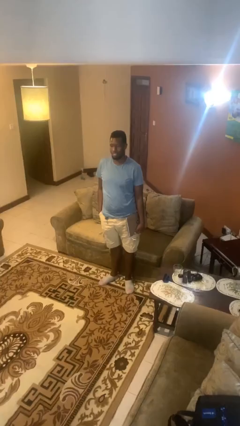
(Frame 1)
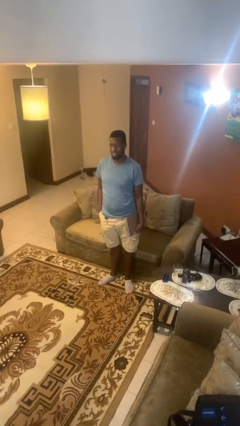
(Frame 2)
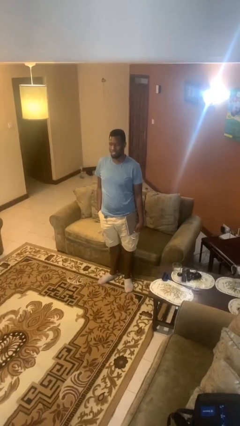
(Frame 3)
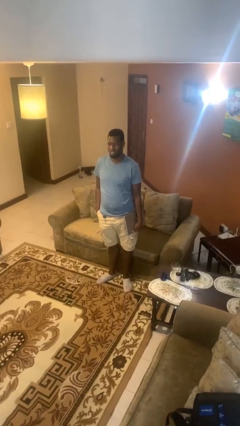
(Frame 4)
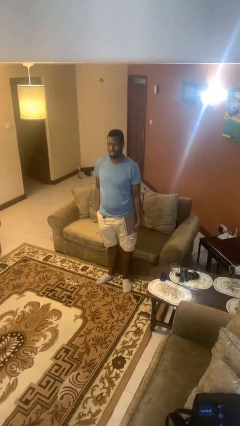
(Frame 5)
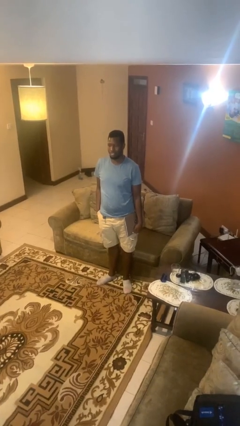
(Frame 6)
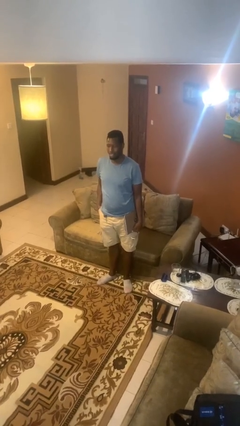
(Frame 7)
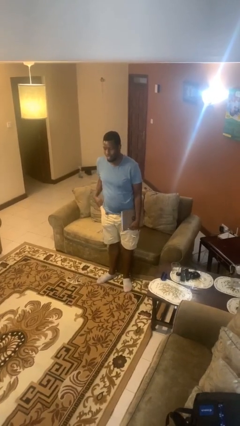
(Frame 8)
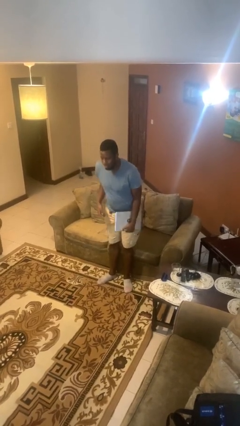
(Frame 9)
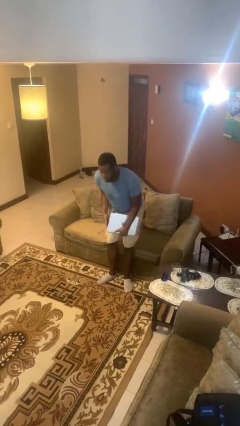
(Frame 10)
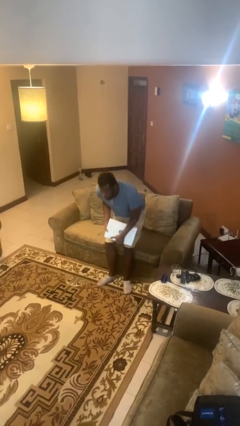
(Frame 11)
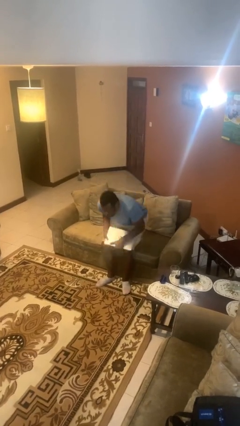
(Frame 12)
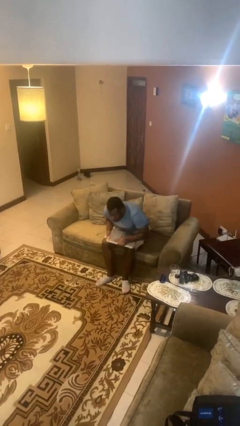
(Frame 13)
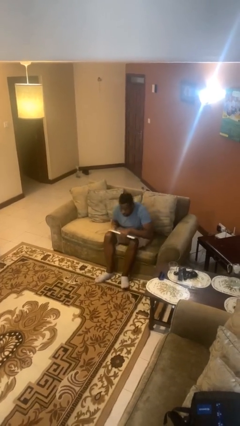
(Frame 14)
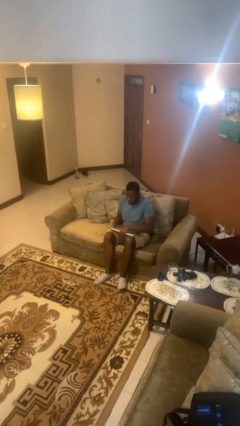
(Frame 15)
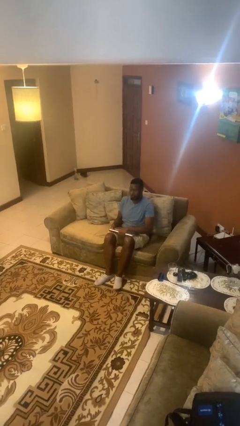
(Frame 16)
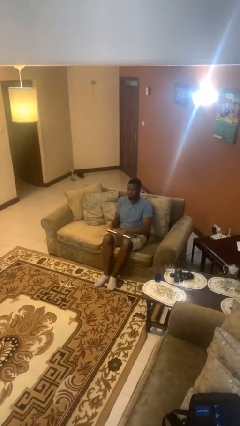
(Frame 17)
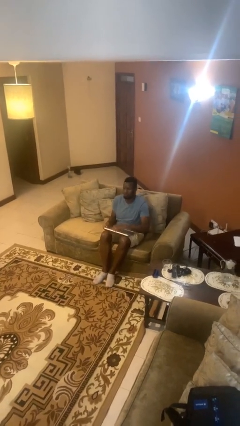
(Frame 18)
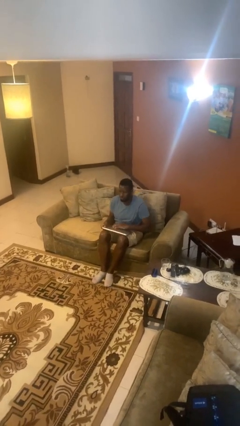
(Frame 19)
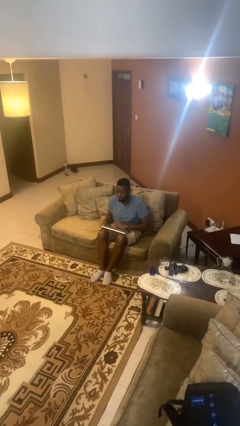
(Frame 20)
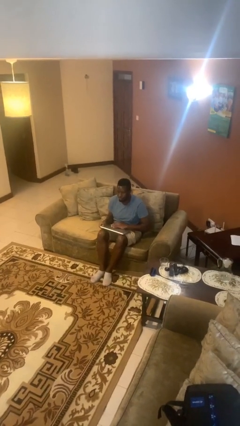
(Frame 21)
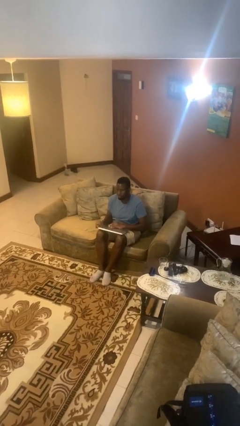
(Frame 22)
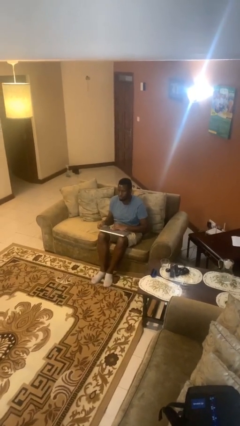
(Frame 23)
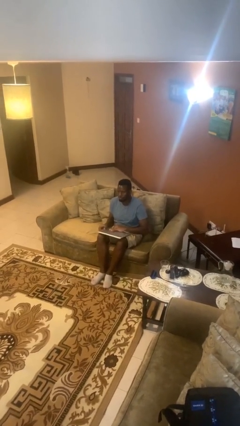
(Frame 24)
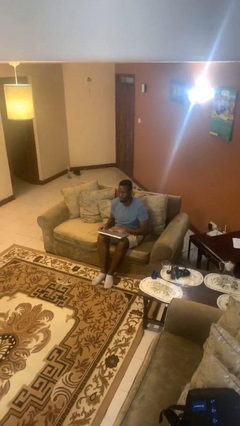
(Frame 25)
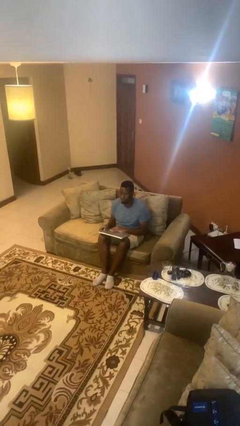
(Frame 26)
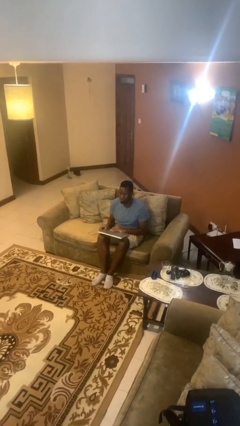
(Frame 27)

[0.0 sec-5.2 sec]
person sits down

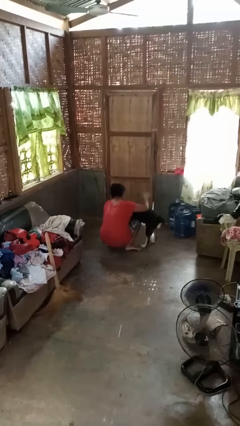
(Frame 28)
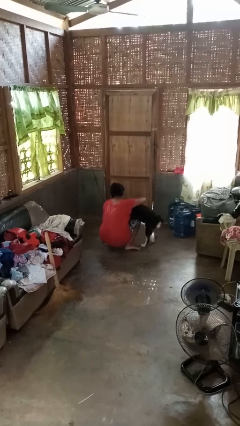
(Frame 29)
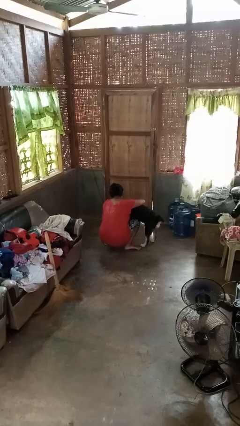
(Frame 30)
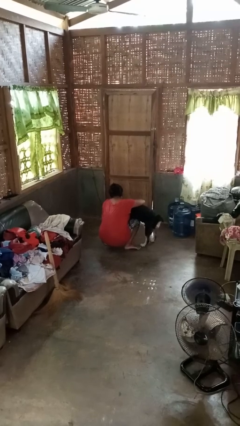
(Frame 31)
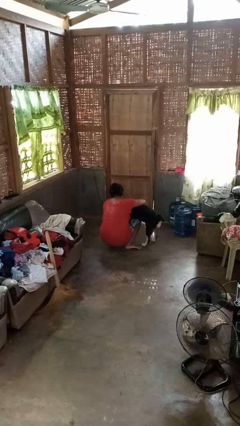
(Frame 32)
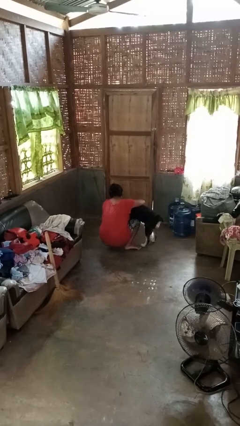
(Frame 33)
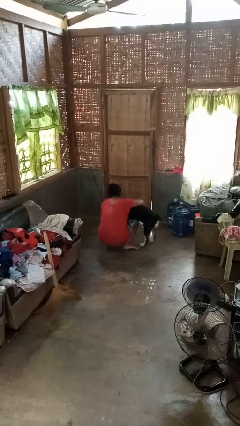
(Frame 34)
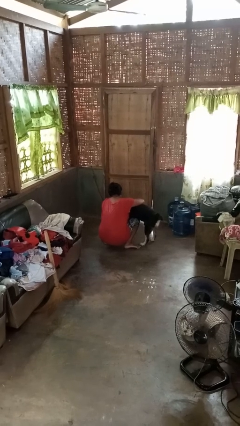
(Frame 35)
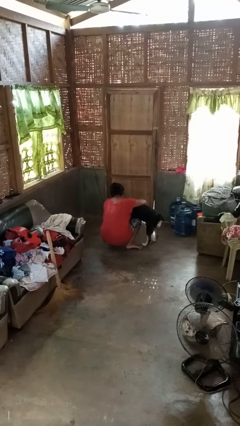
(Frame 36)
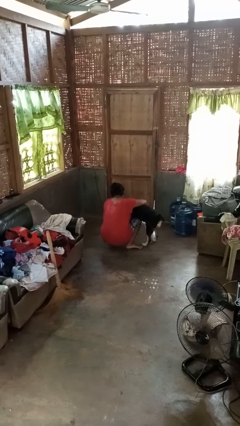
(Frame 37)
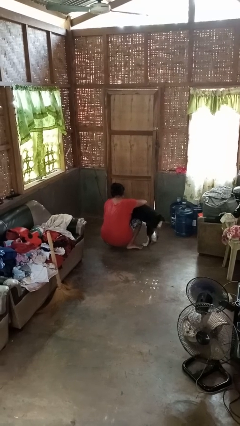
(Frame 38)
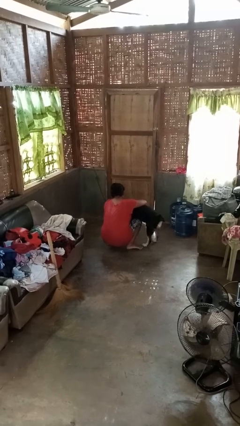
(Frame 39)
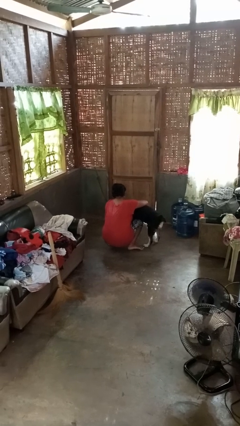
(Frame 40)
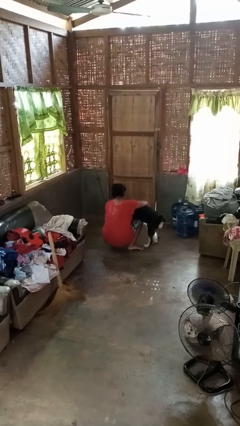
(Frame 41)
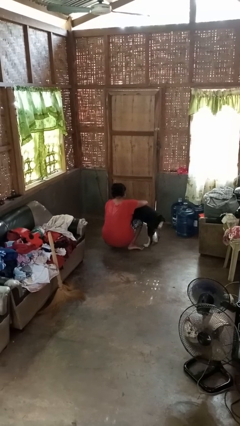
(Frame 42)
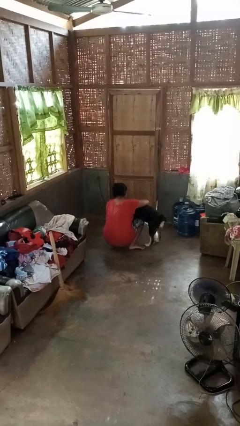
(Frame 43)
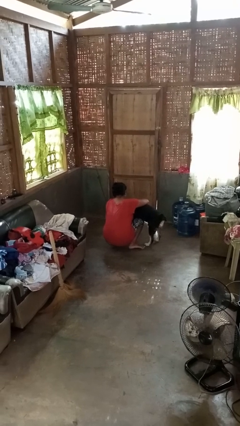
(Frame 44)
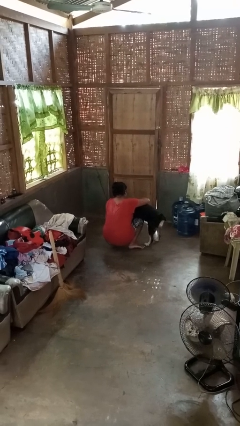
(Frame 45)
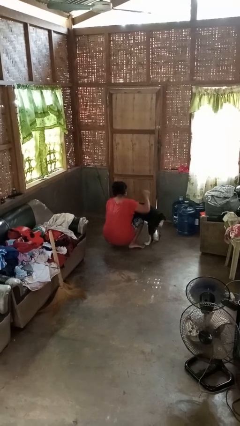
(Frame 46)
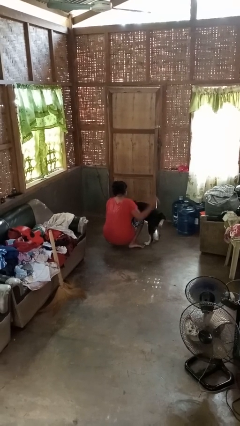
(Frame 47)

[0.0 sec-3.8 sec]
person hugs dog

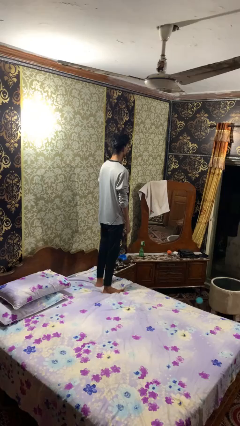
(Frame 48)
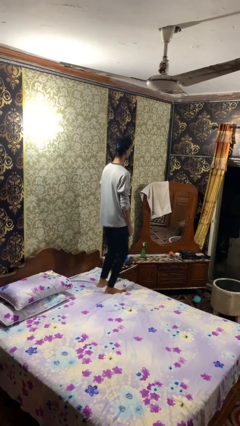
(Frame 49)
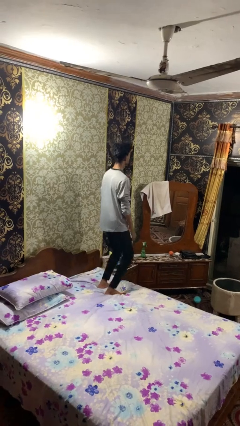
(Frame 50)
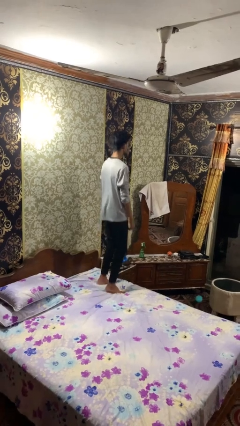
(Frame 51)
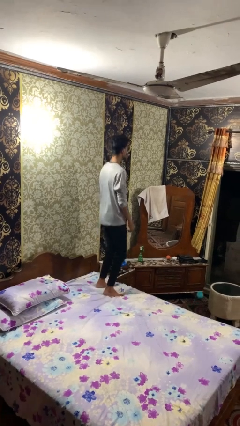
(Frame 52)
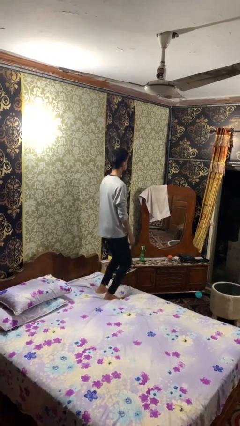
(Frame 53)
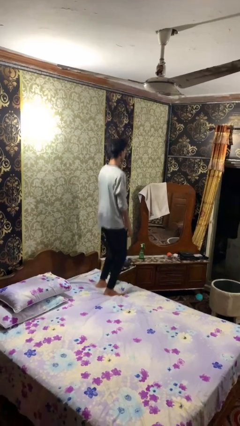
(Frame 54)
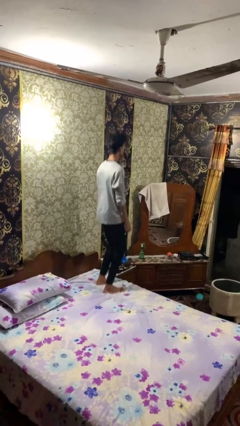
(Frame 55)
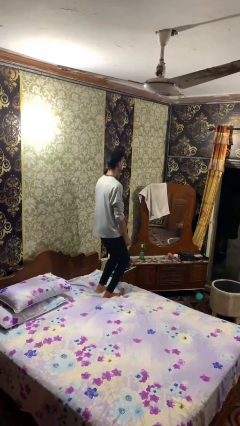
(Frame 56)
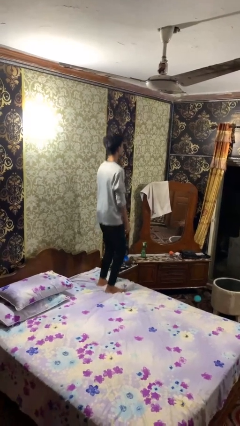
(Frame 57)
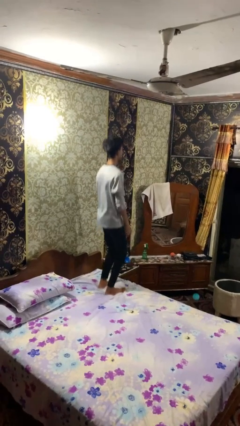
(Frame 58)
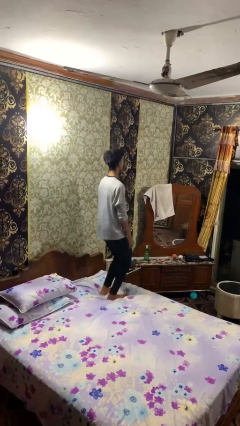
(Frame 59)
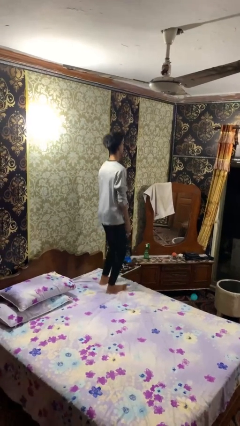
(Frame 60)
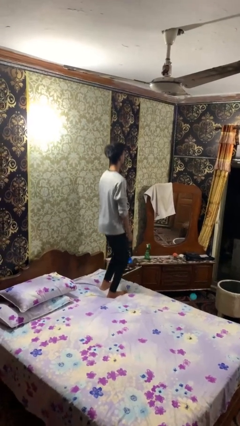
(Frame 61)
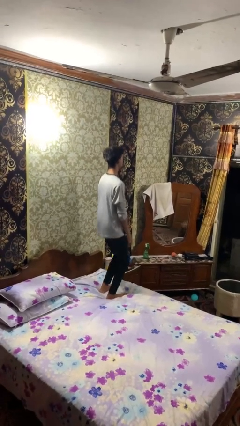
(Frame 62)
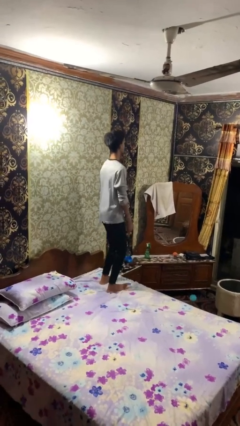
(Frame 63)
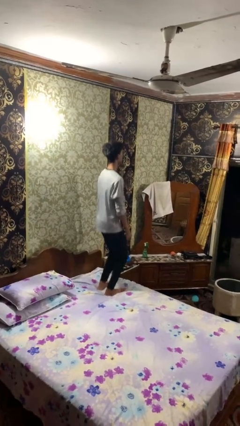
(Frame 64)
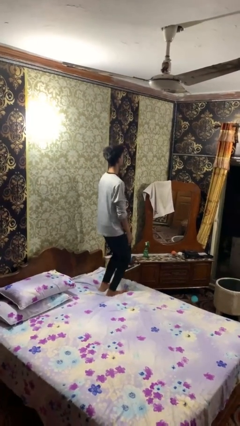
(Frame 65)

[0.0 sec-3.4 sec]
person jumps on bed

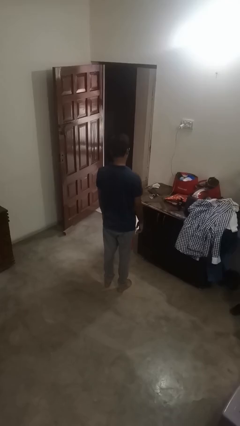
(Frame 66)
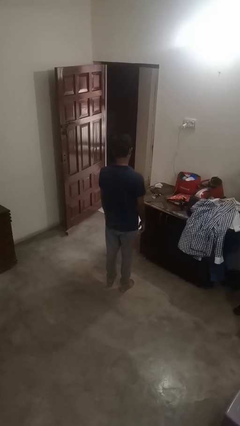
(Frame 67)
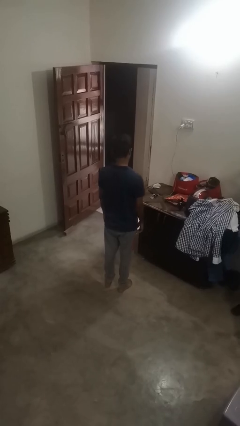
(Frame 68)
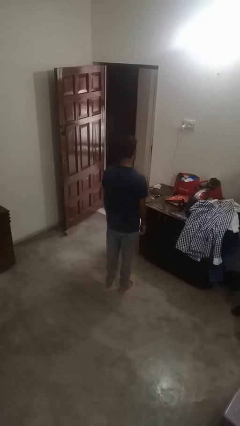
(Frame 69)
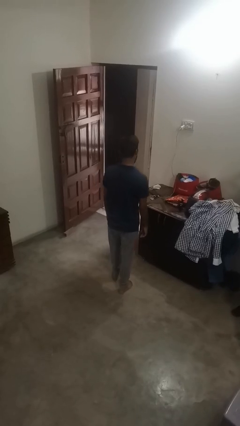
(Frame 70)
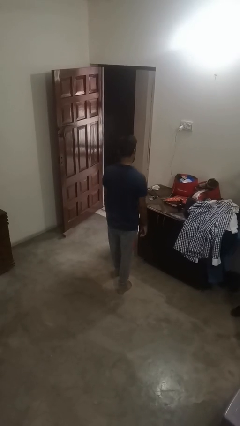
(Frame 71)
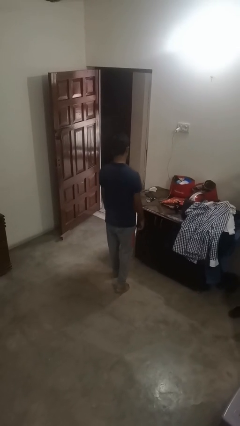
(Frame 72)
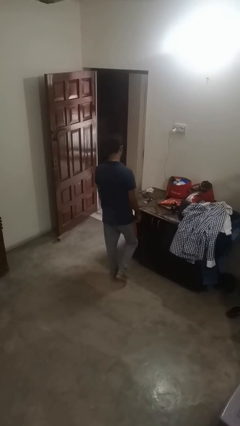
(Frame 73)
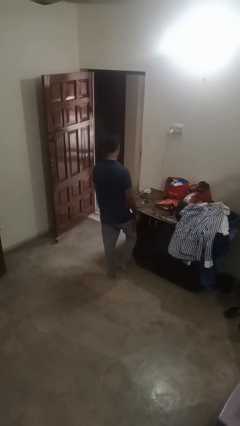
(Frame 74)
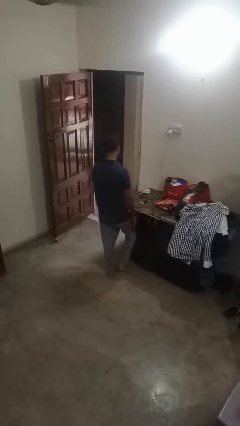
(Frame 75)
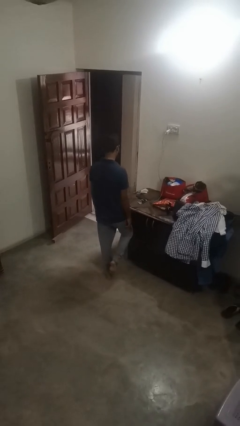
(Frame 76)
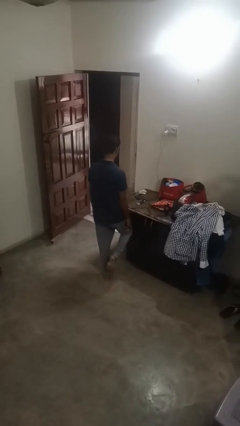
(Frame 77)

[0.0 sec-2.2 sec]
person stubs toe

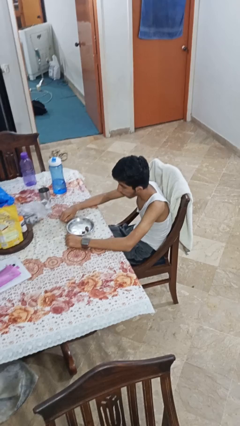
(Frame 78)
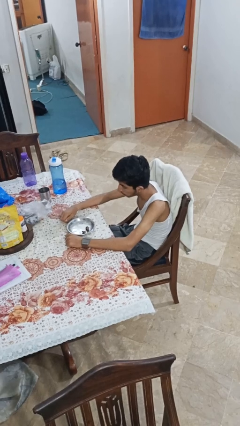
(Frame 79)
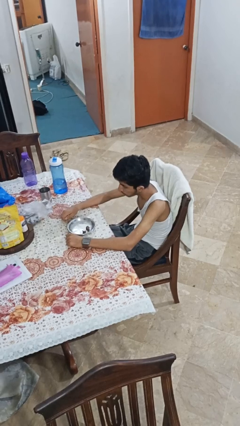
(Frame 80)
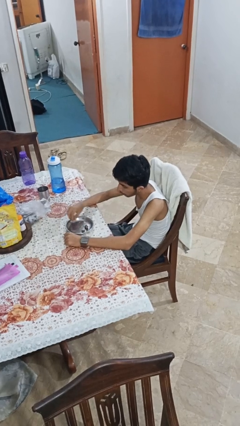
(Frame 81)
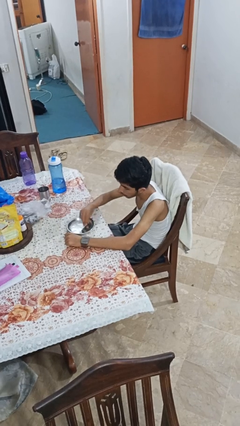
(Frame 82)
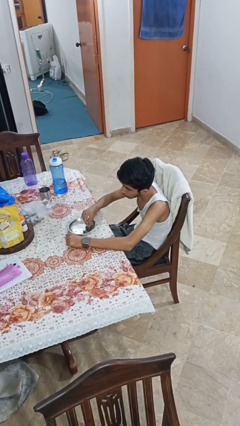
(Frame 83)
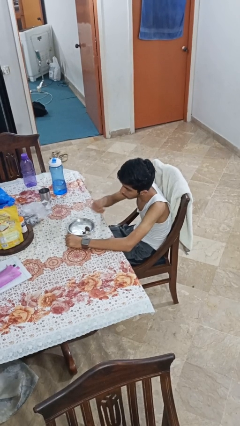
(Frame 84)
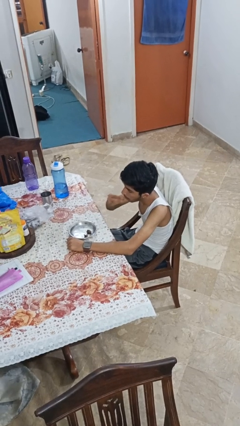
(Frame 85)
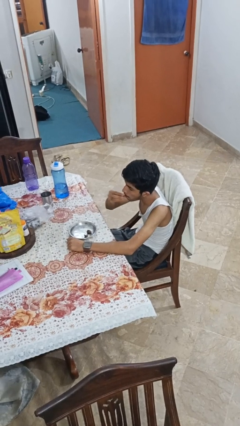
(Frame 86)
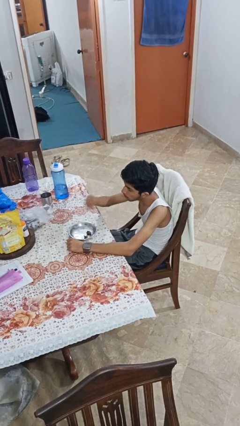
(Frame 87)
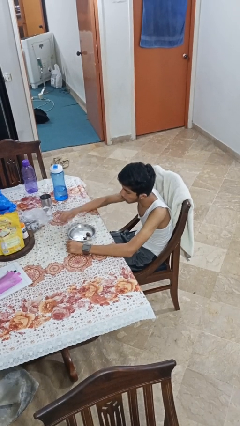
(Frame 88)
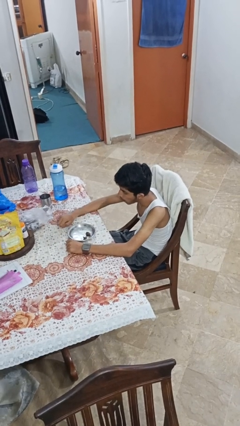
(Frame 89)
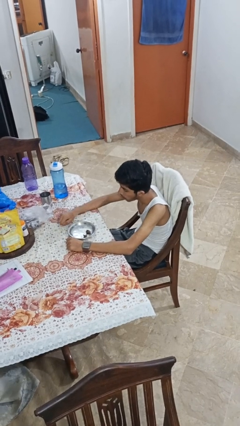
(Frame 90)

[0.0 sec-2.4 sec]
person eats with hands

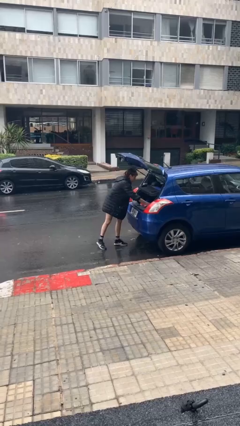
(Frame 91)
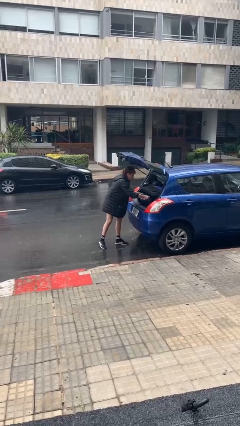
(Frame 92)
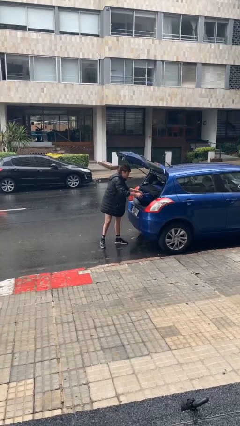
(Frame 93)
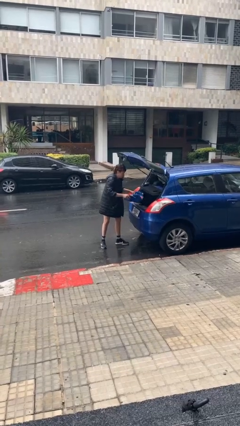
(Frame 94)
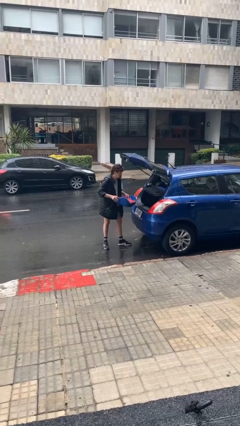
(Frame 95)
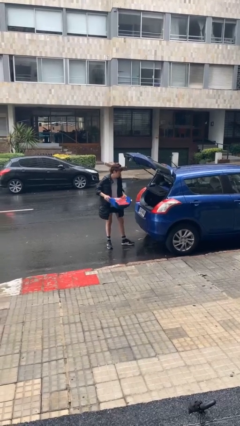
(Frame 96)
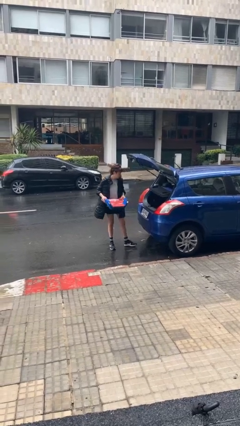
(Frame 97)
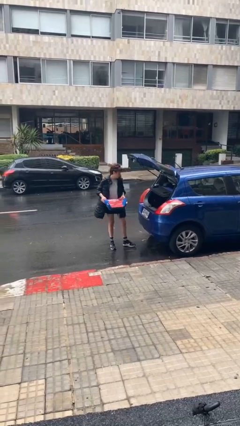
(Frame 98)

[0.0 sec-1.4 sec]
person unloads car
